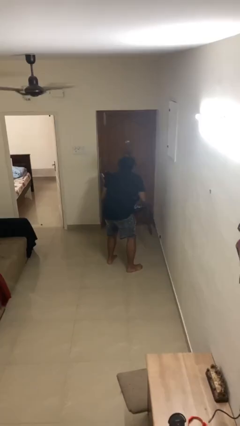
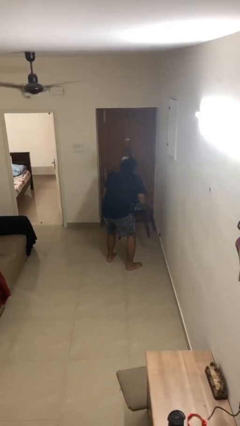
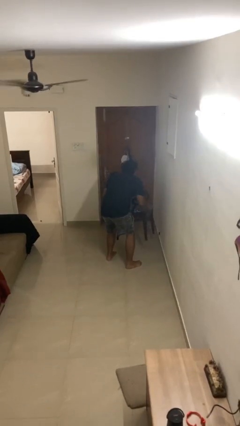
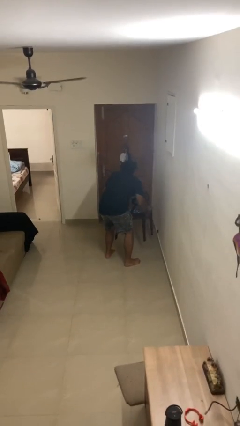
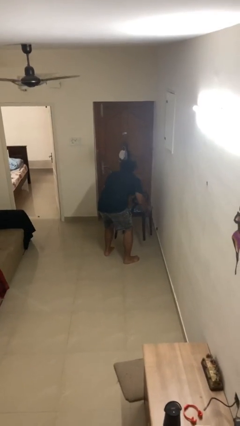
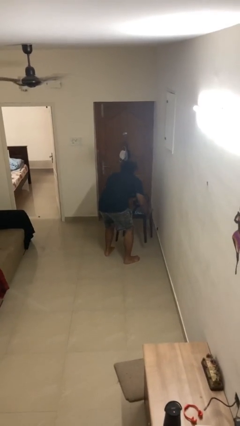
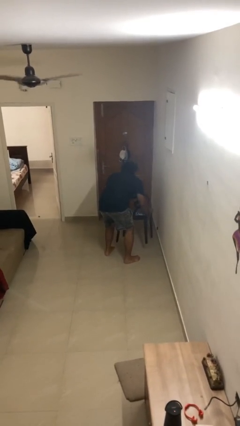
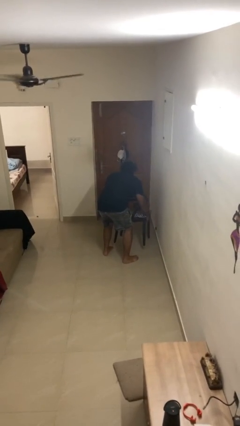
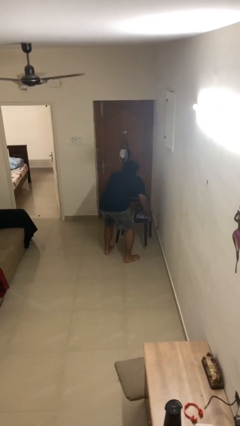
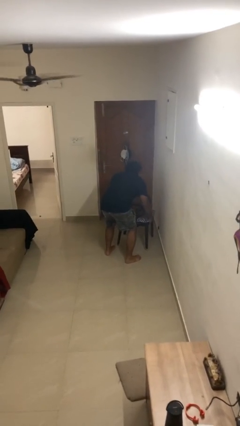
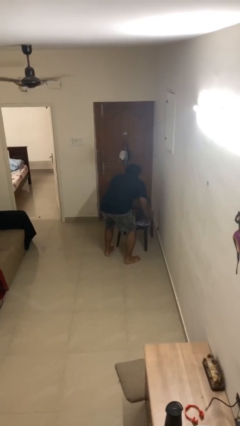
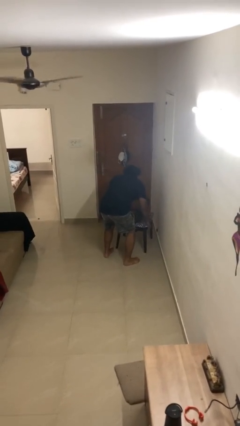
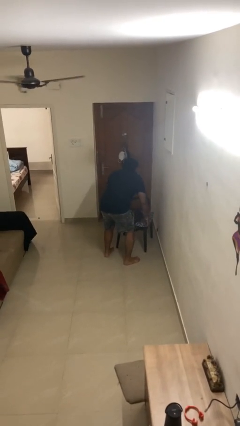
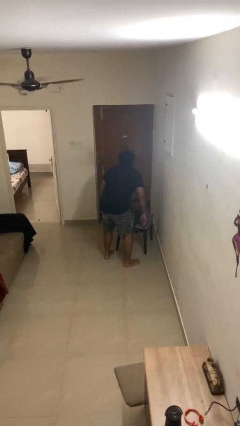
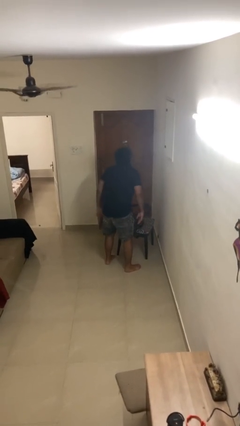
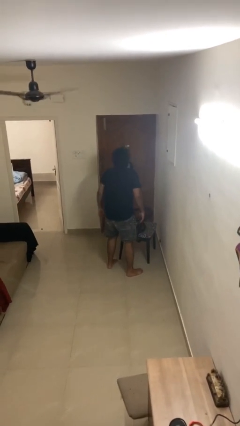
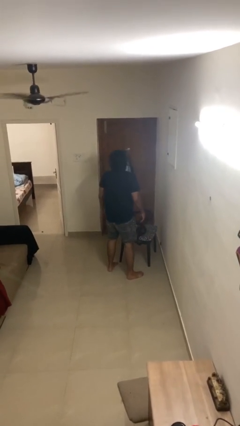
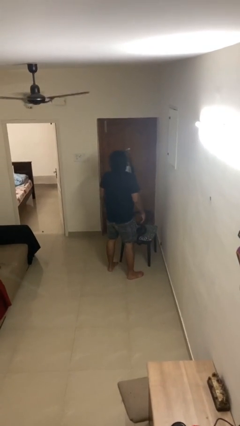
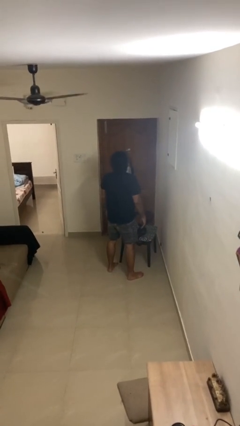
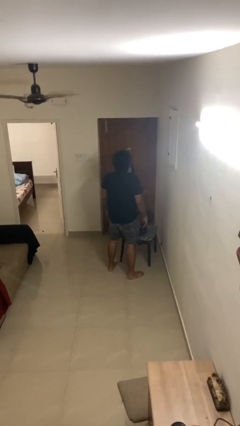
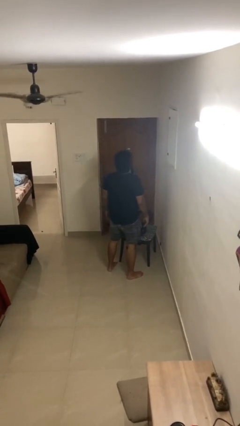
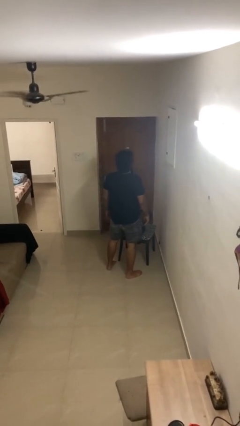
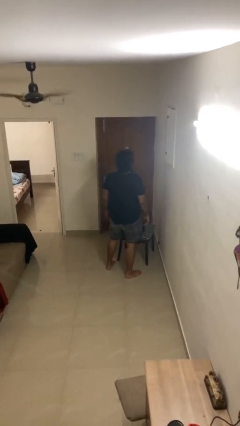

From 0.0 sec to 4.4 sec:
person puts down object on floor

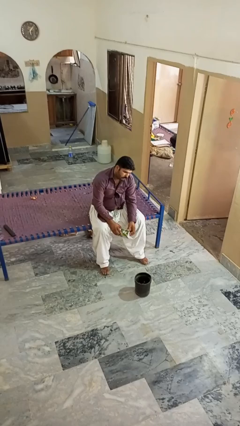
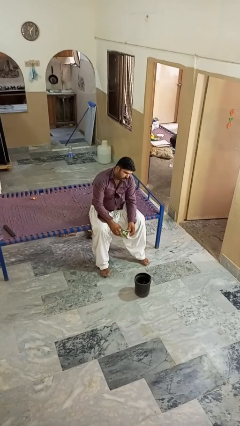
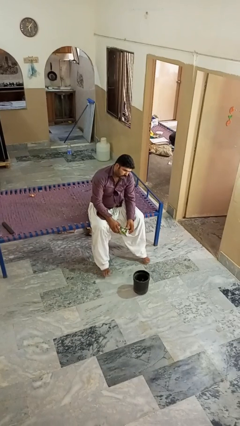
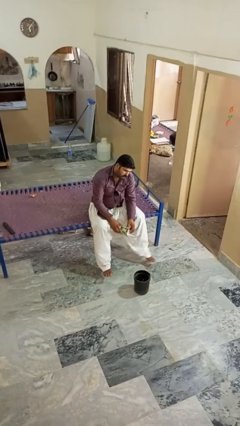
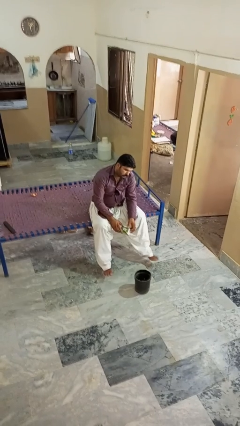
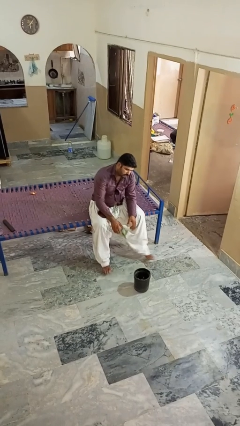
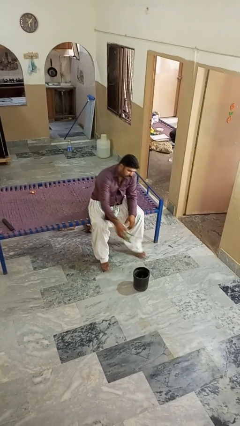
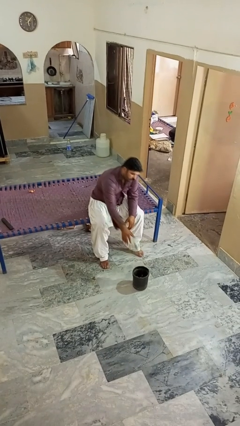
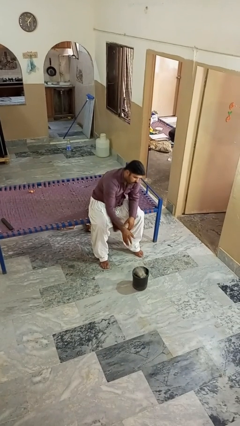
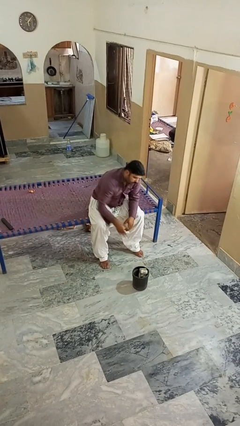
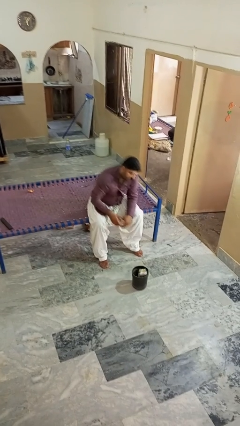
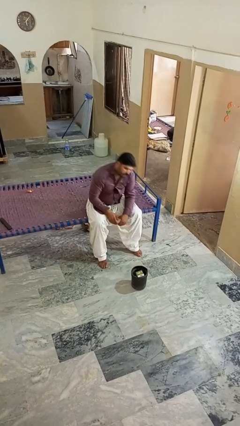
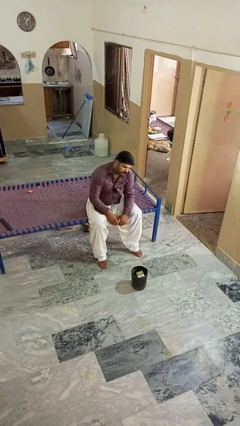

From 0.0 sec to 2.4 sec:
person puts object into basket

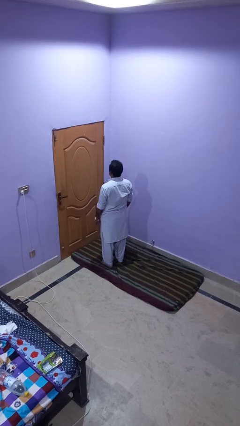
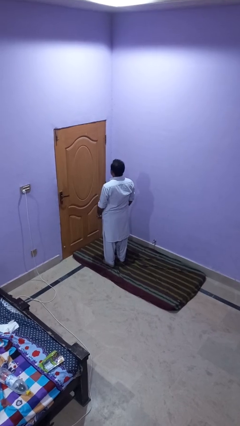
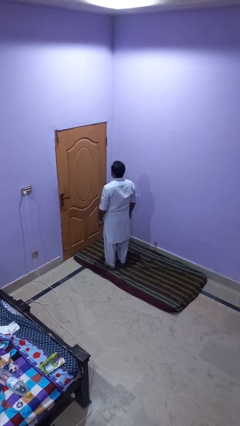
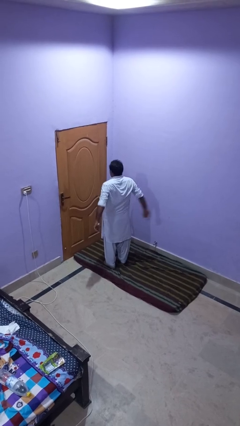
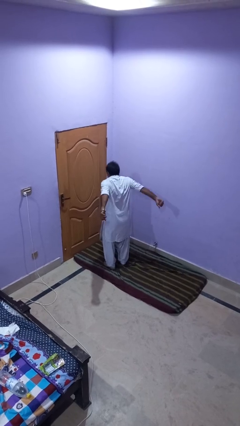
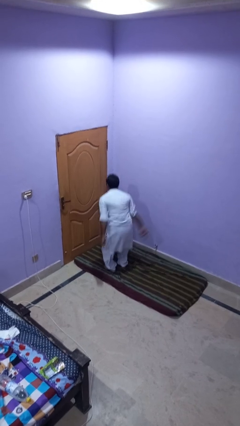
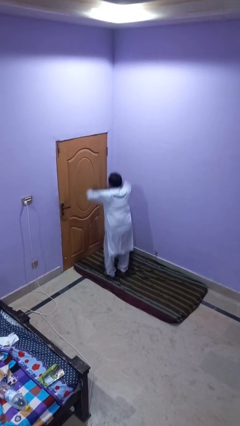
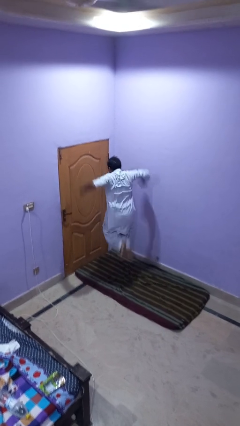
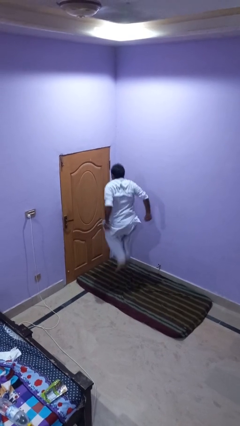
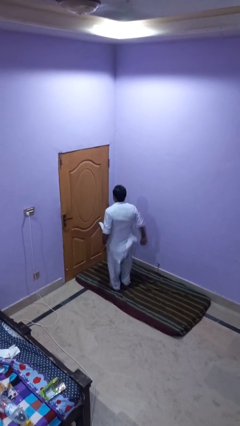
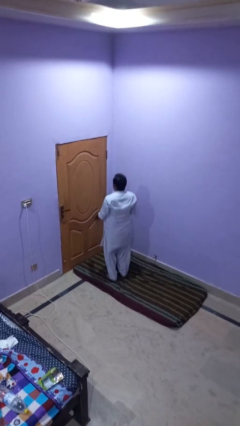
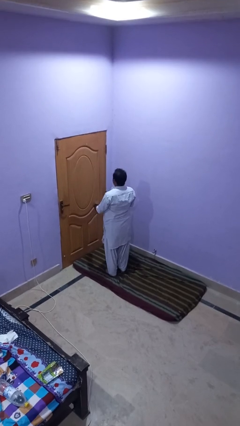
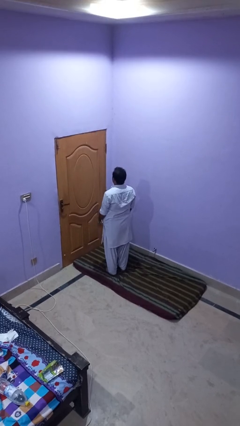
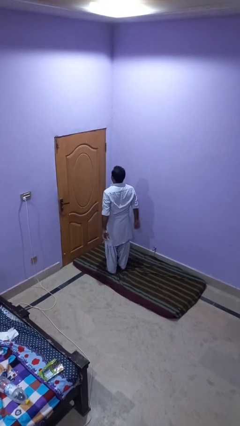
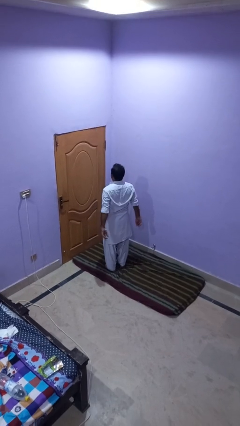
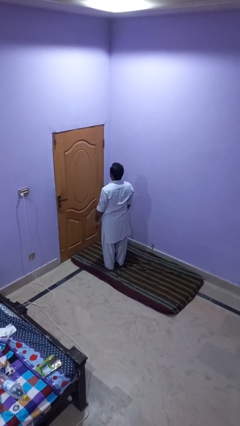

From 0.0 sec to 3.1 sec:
person jumps

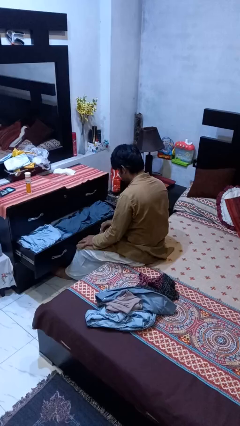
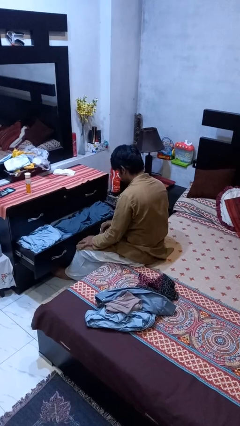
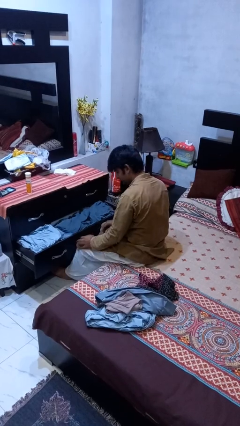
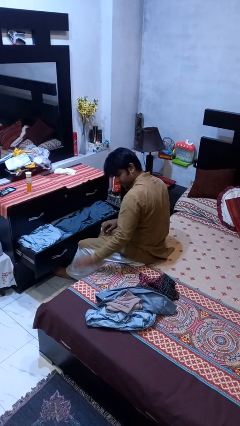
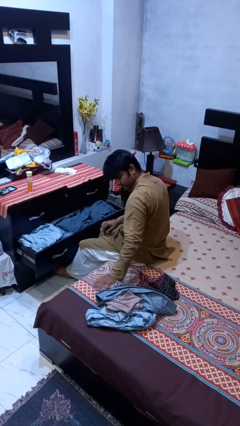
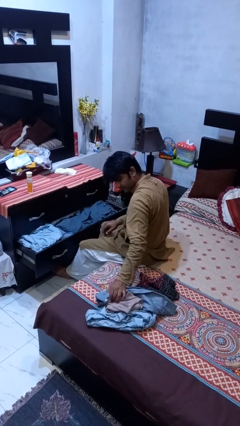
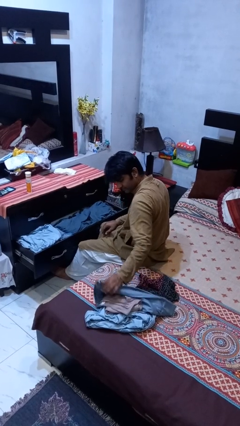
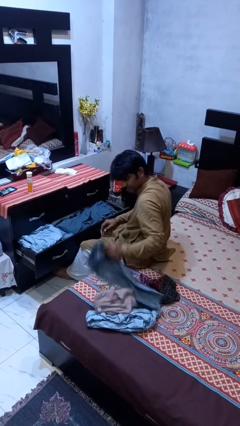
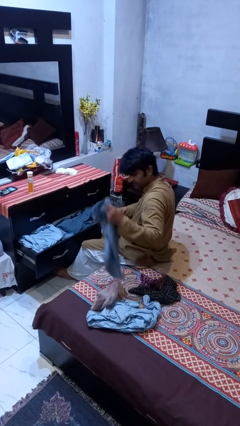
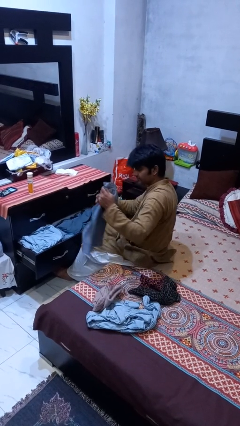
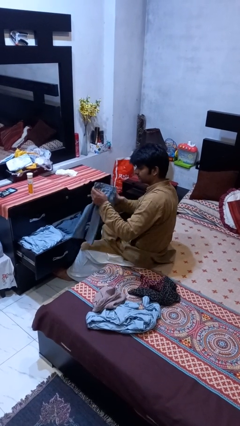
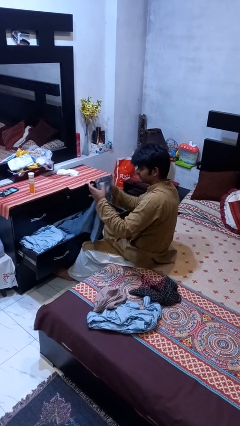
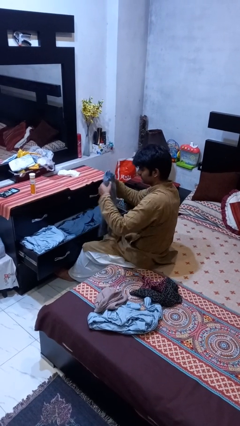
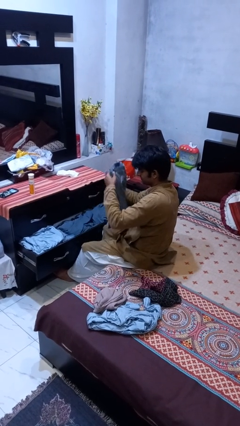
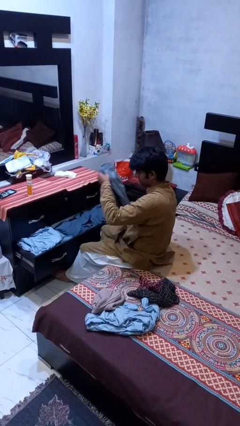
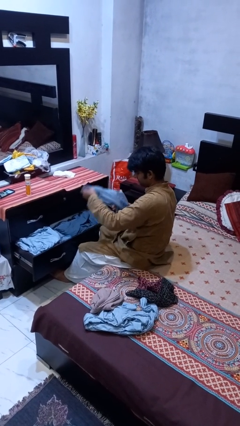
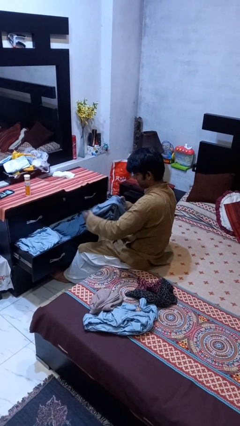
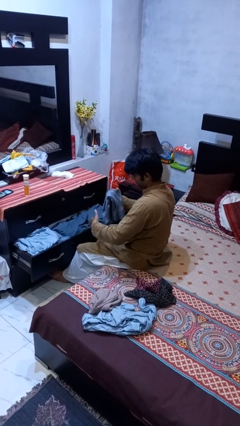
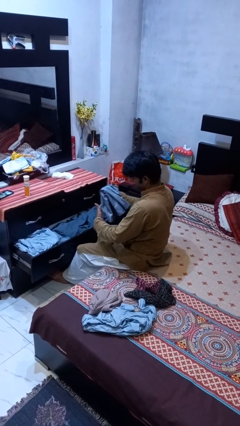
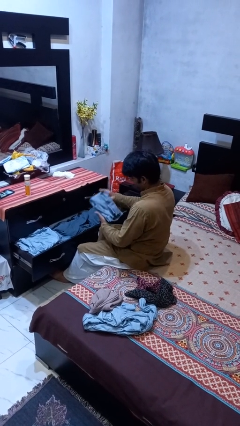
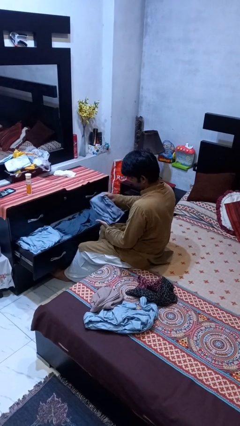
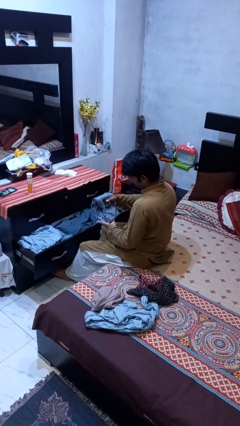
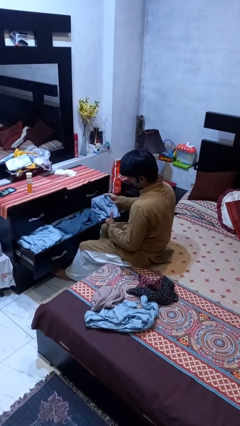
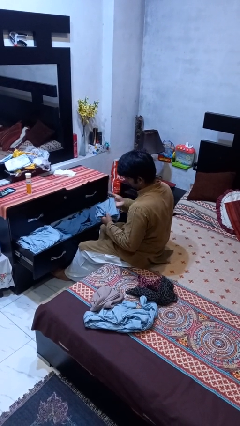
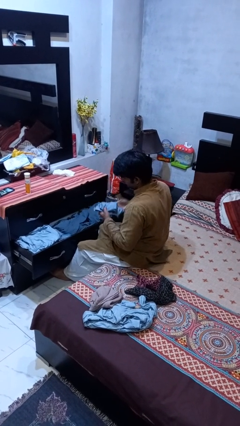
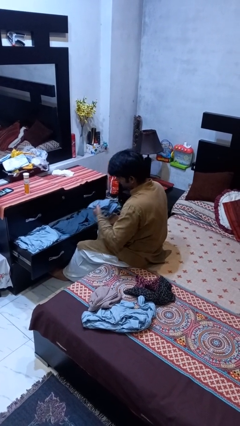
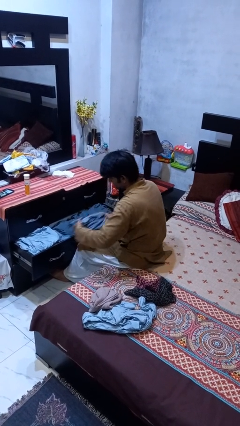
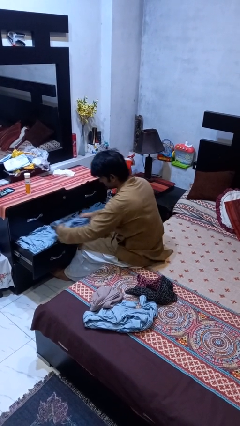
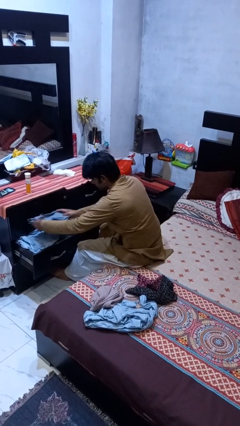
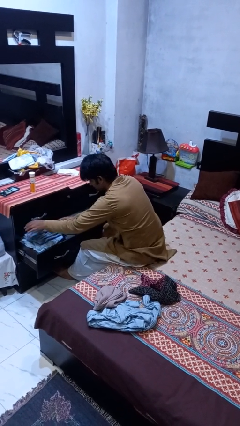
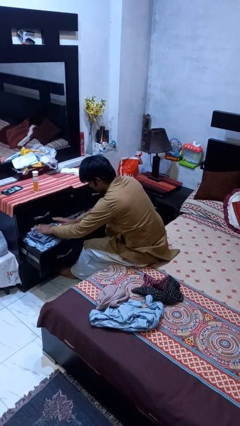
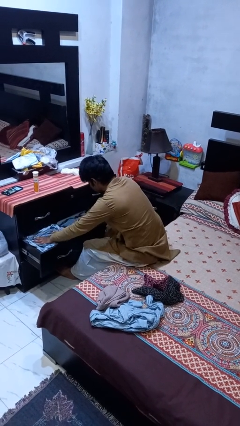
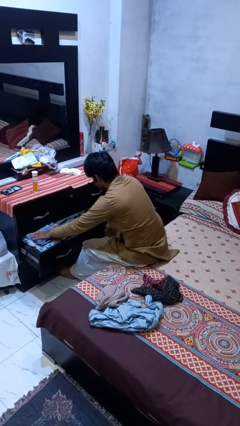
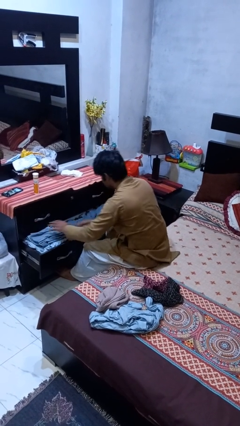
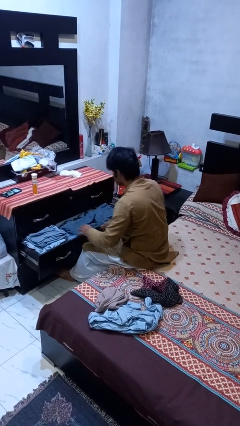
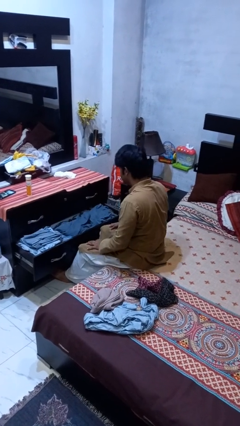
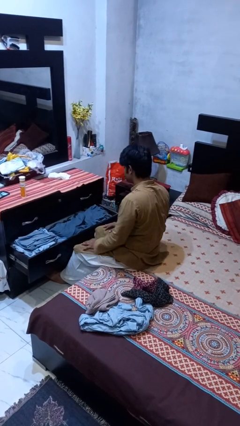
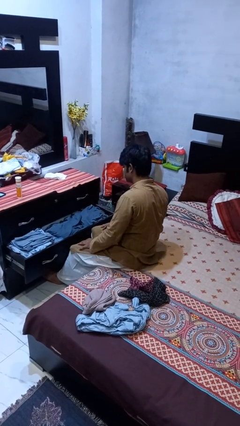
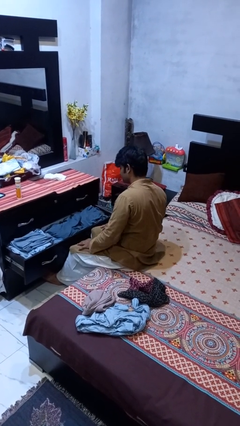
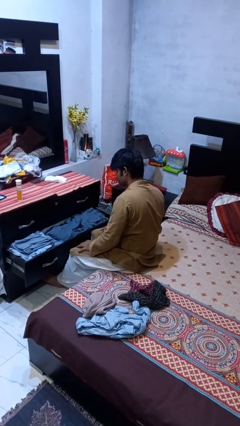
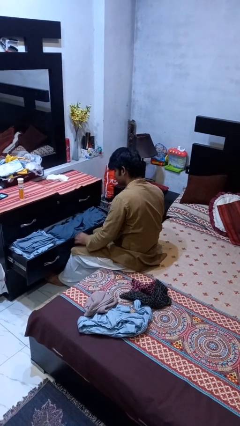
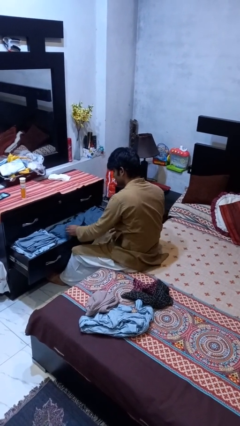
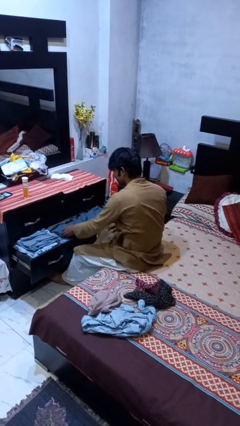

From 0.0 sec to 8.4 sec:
person puts clothes into dresser
